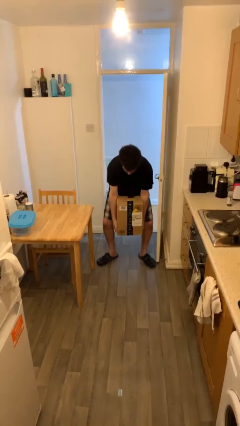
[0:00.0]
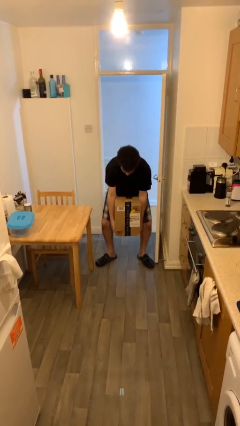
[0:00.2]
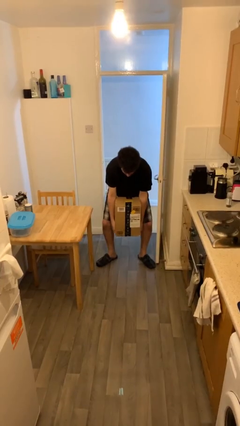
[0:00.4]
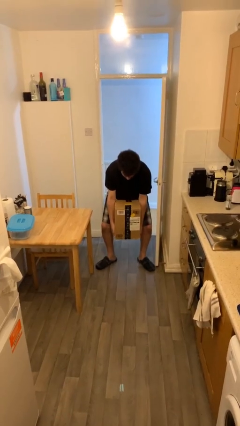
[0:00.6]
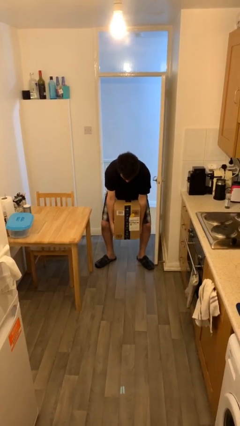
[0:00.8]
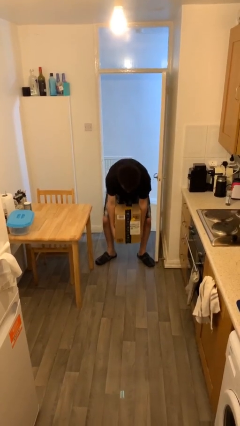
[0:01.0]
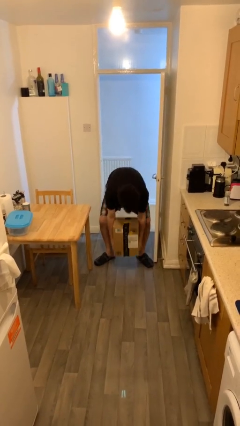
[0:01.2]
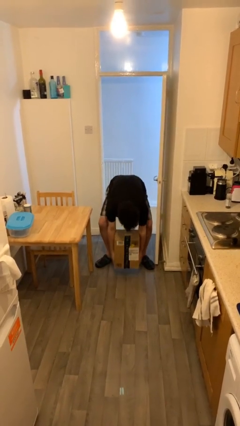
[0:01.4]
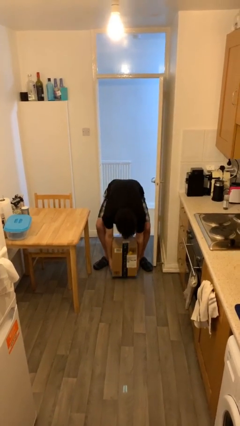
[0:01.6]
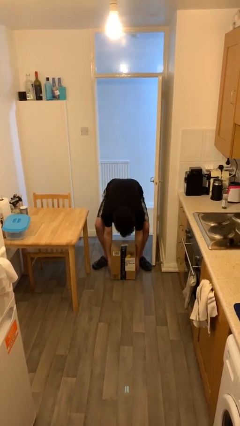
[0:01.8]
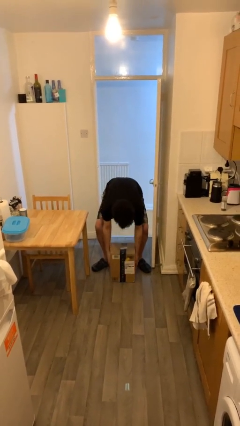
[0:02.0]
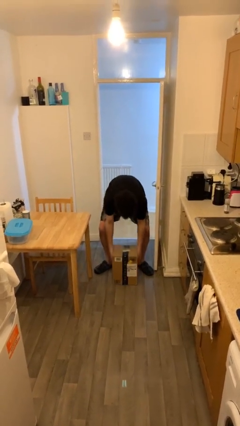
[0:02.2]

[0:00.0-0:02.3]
person puts down object on floor

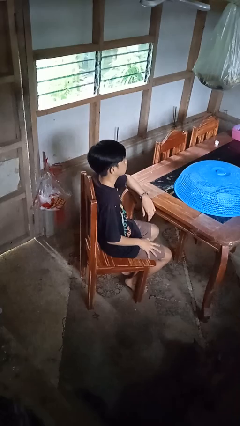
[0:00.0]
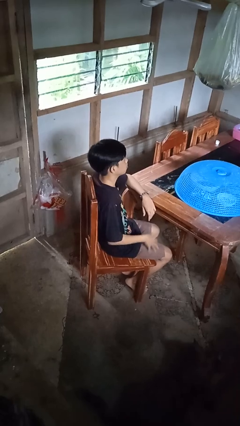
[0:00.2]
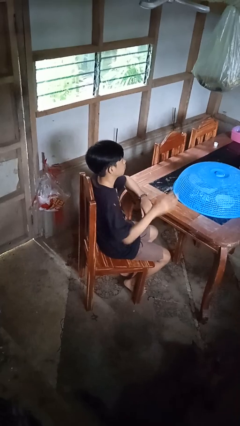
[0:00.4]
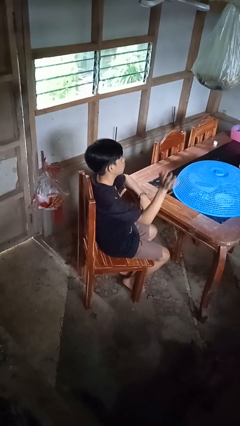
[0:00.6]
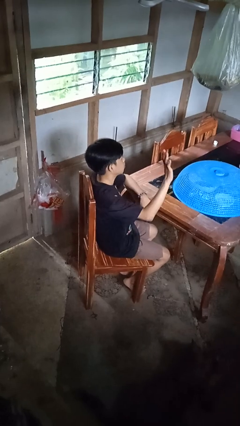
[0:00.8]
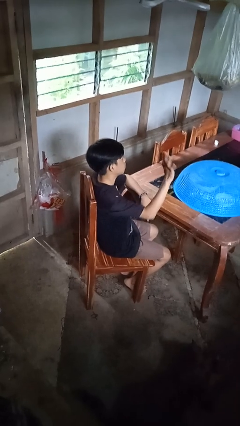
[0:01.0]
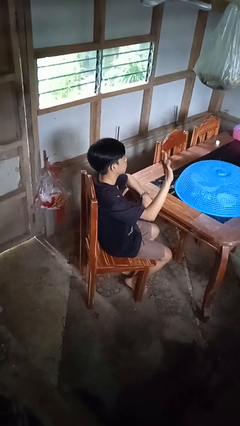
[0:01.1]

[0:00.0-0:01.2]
person waves at person

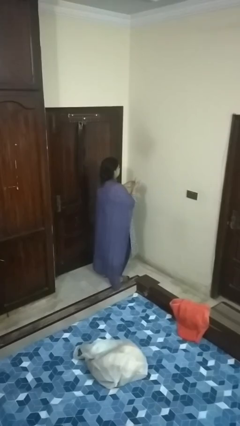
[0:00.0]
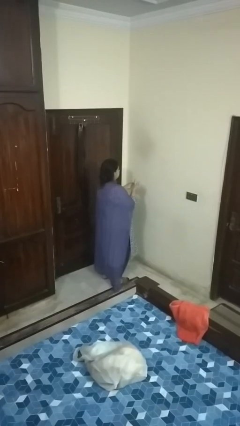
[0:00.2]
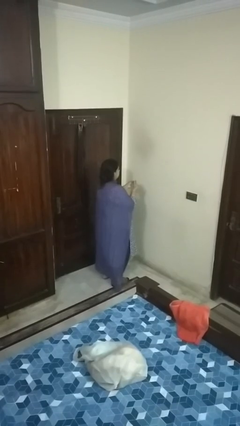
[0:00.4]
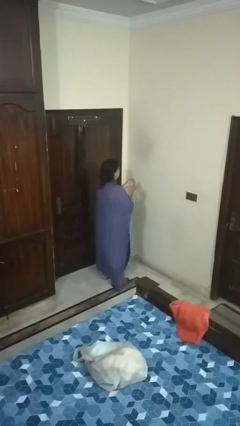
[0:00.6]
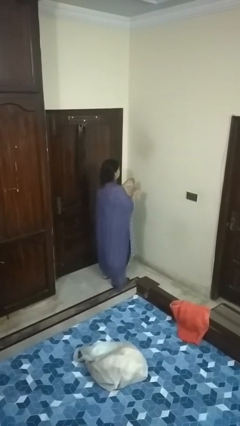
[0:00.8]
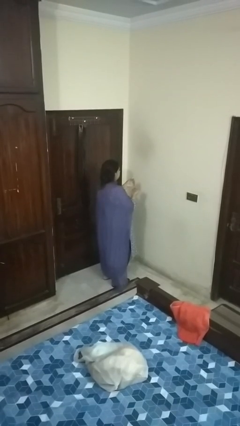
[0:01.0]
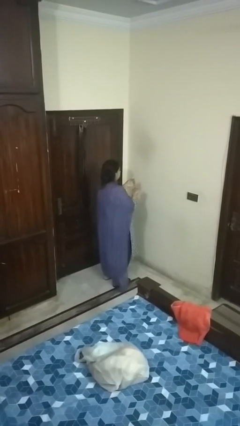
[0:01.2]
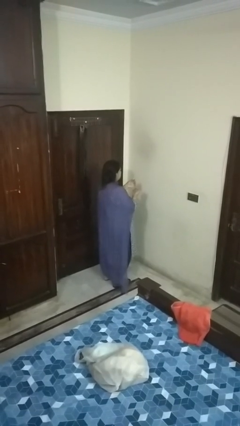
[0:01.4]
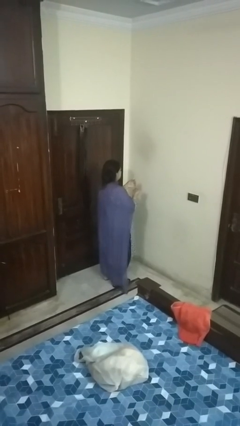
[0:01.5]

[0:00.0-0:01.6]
person takes off ring

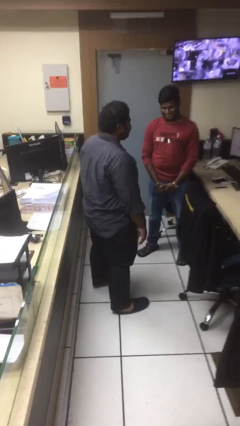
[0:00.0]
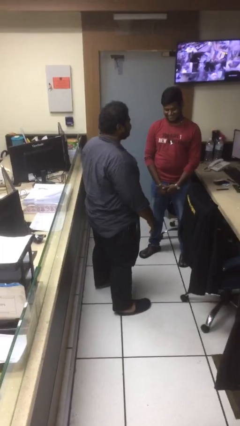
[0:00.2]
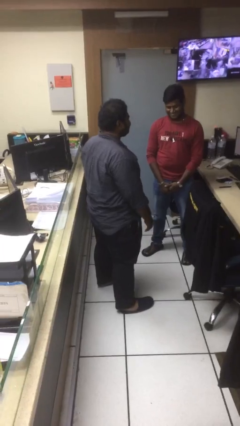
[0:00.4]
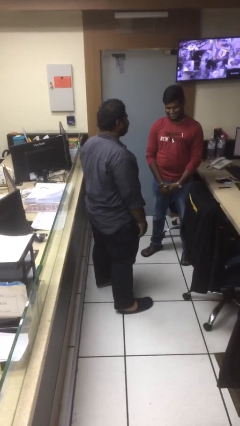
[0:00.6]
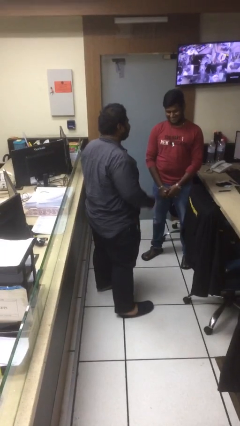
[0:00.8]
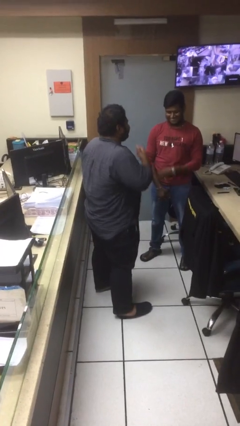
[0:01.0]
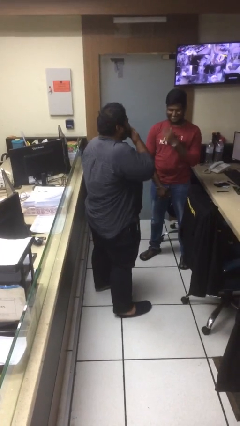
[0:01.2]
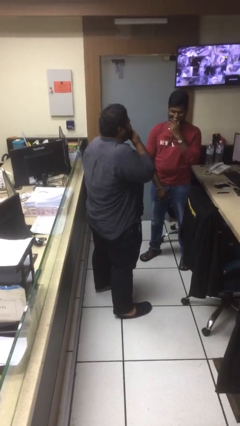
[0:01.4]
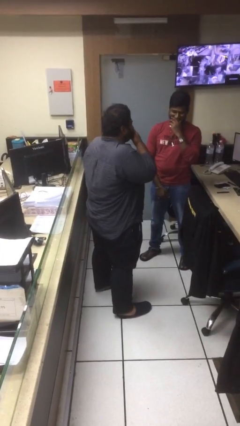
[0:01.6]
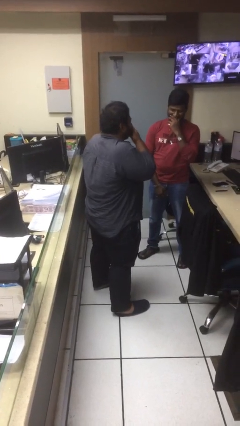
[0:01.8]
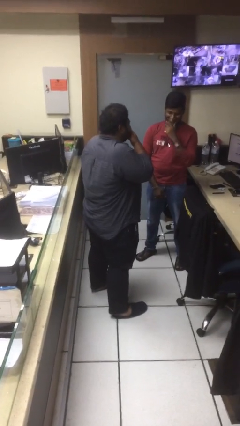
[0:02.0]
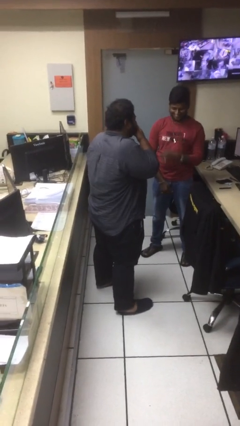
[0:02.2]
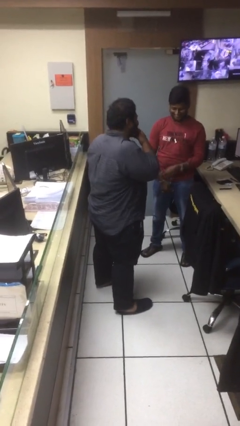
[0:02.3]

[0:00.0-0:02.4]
person laughs with person

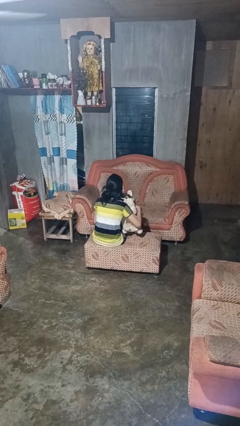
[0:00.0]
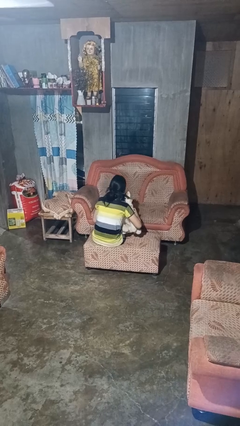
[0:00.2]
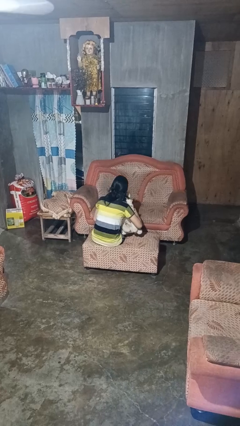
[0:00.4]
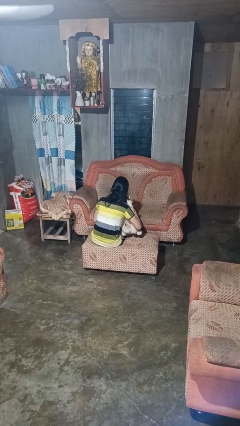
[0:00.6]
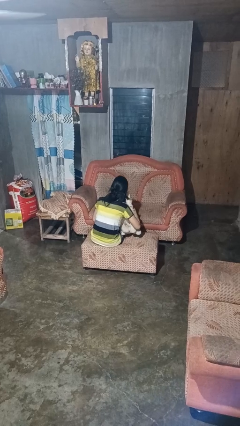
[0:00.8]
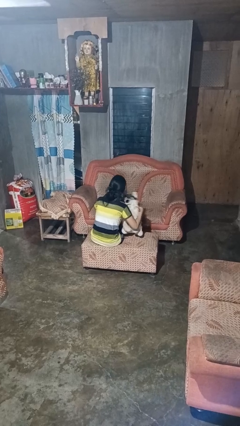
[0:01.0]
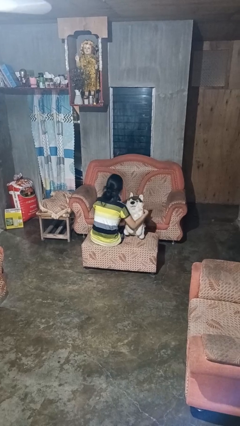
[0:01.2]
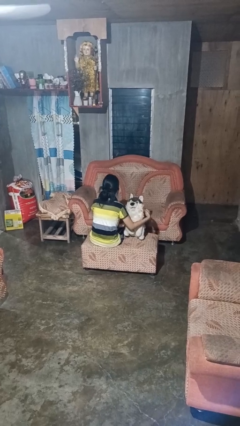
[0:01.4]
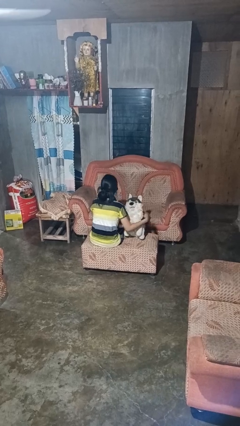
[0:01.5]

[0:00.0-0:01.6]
person hugs stuffed animal

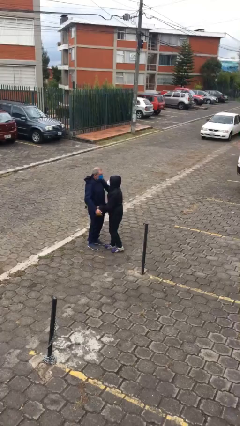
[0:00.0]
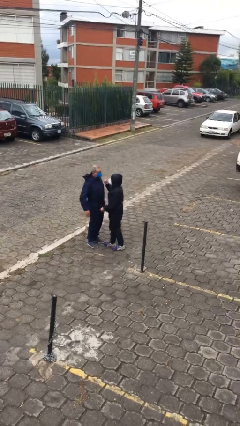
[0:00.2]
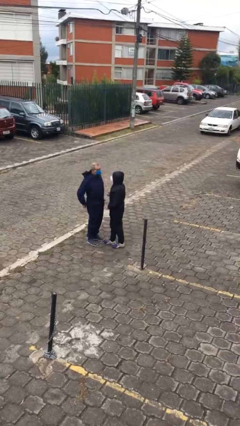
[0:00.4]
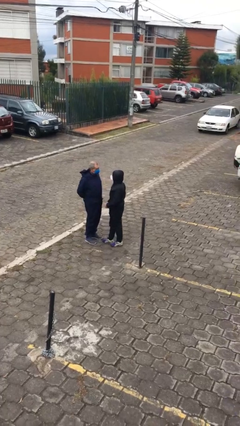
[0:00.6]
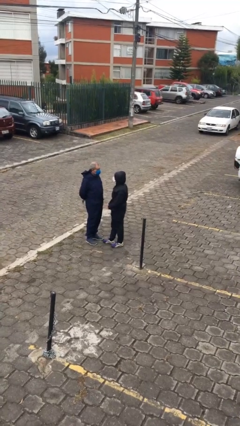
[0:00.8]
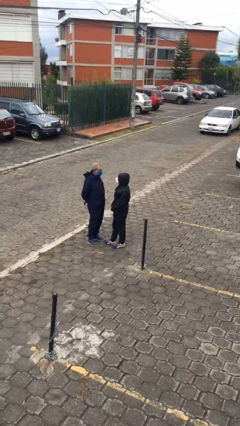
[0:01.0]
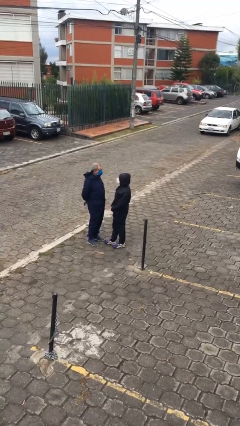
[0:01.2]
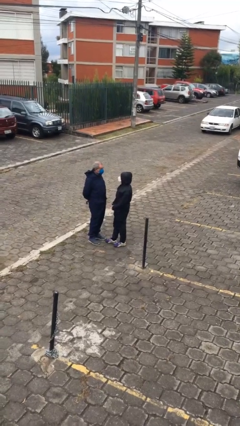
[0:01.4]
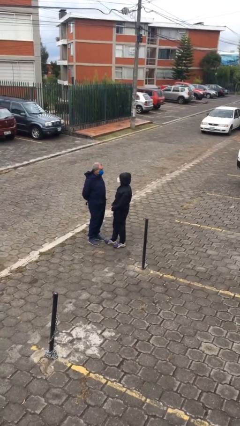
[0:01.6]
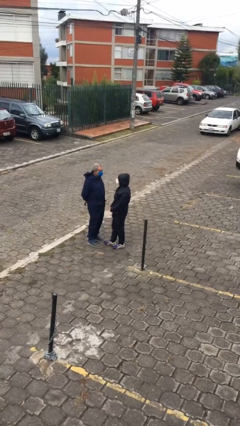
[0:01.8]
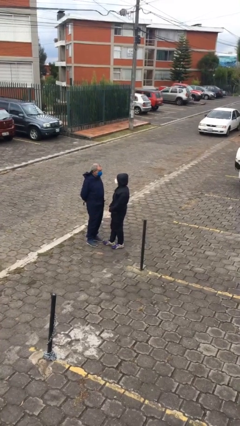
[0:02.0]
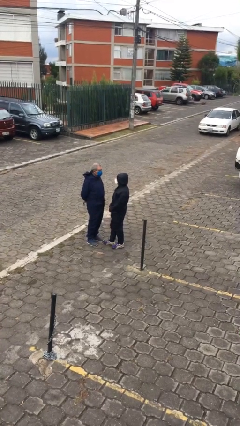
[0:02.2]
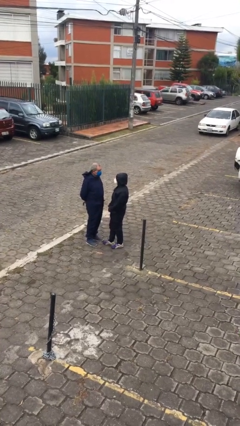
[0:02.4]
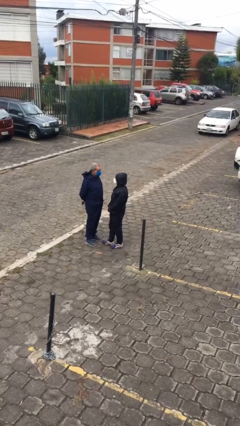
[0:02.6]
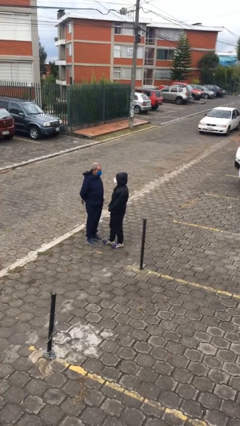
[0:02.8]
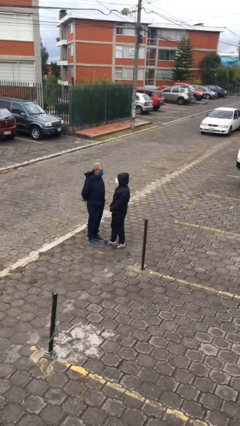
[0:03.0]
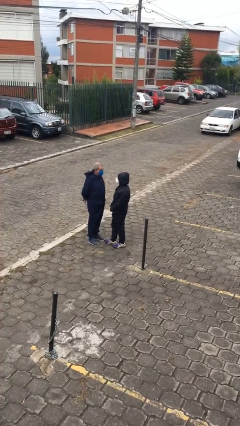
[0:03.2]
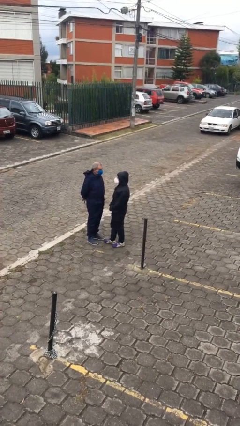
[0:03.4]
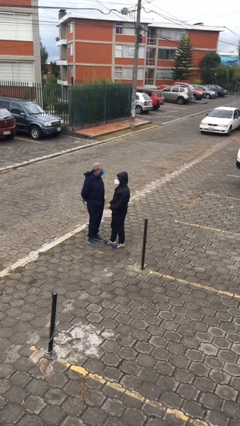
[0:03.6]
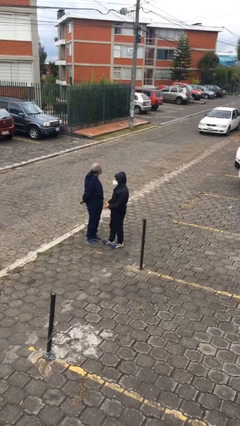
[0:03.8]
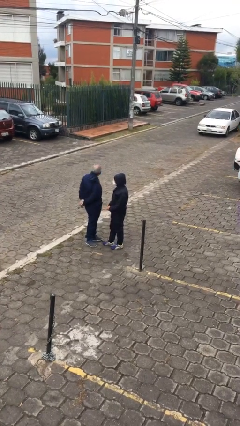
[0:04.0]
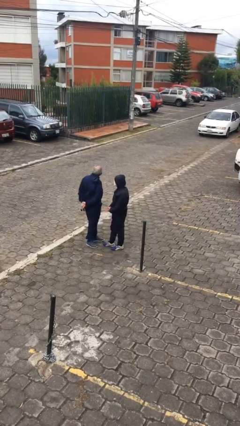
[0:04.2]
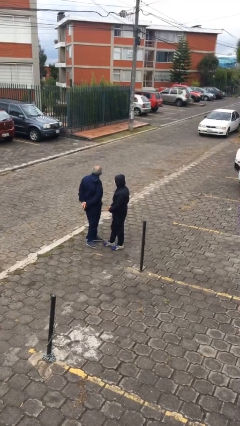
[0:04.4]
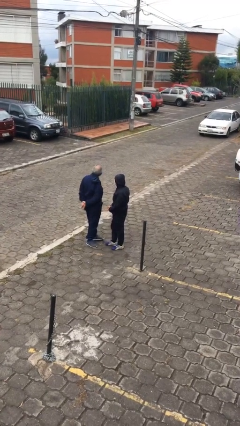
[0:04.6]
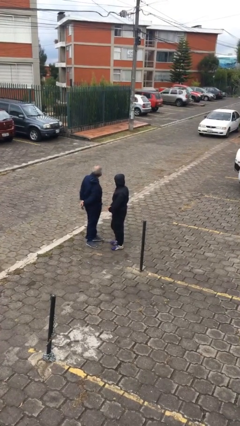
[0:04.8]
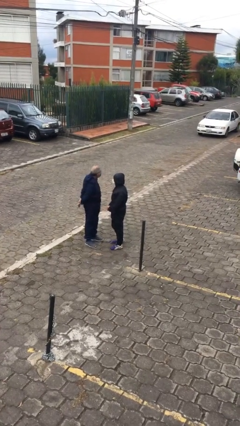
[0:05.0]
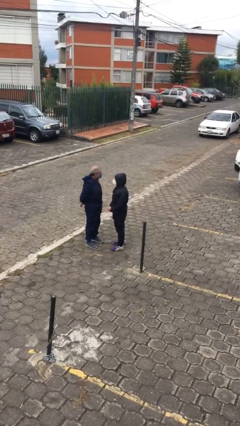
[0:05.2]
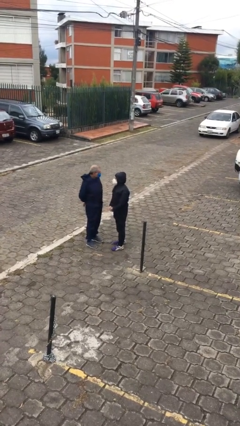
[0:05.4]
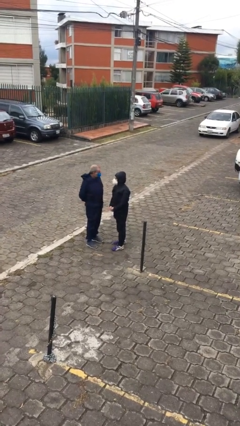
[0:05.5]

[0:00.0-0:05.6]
person talks to person

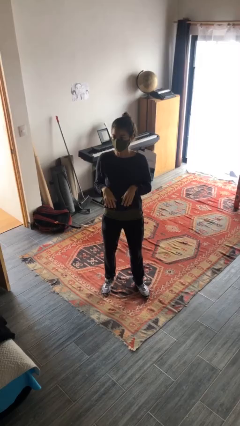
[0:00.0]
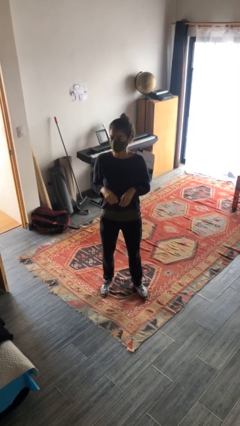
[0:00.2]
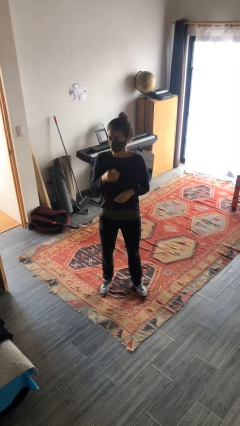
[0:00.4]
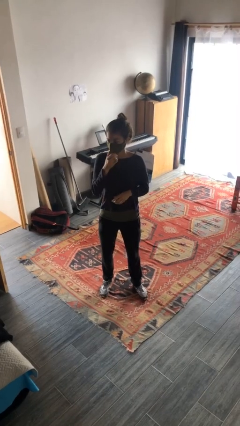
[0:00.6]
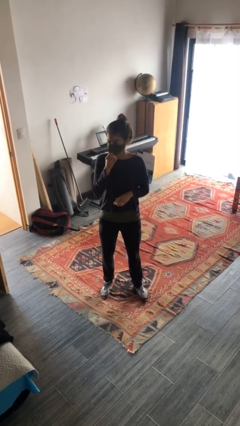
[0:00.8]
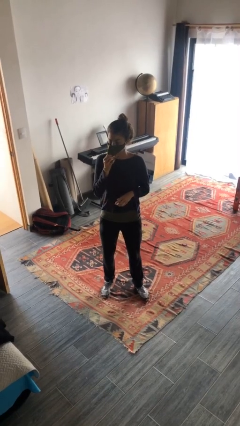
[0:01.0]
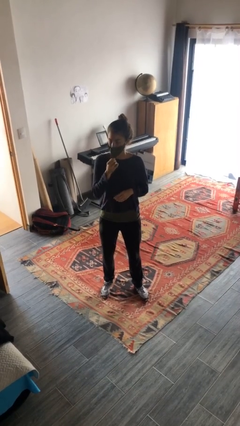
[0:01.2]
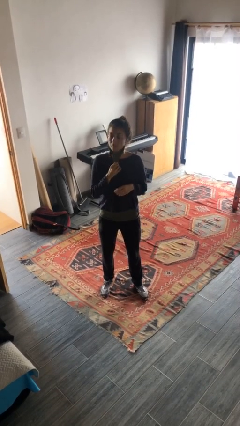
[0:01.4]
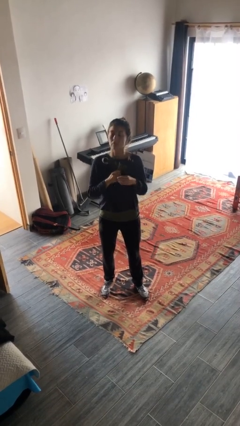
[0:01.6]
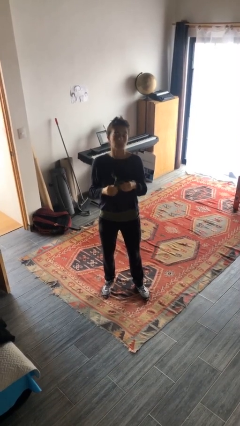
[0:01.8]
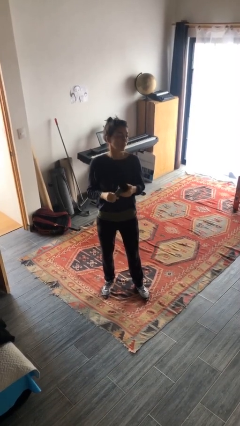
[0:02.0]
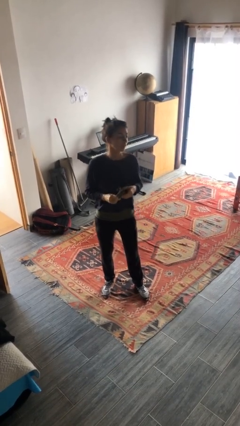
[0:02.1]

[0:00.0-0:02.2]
person takes off facemask
